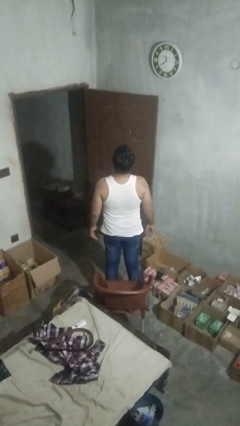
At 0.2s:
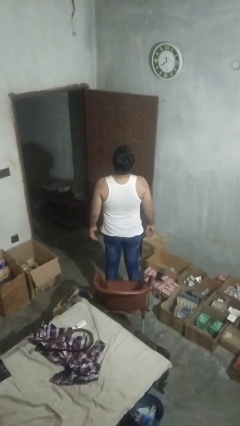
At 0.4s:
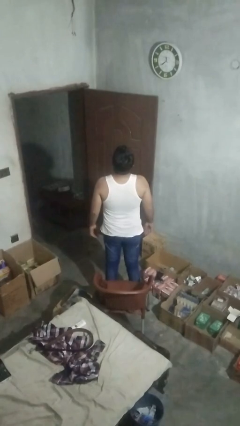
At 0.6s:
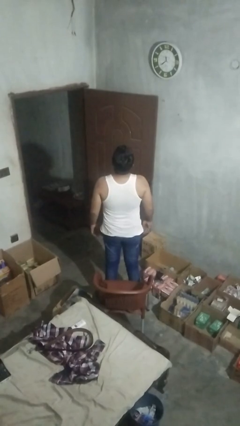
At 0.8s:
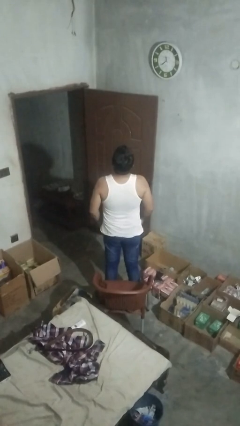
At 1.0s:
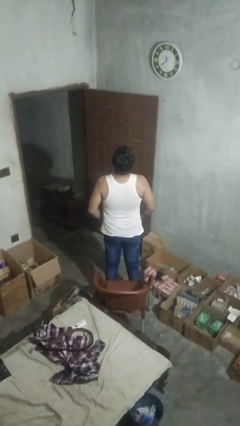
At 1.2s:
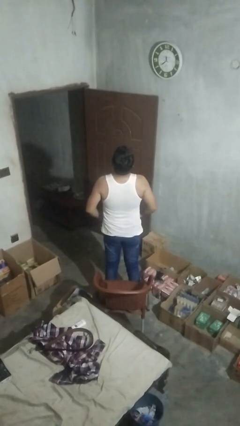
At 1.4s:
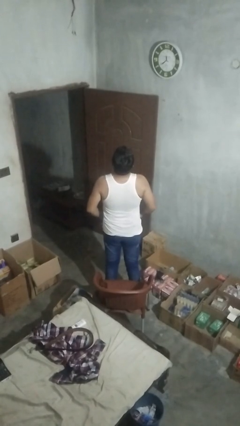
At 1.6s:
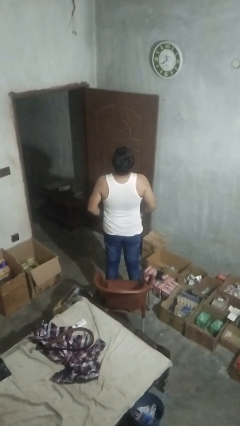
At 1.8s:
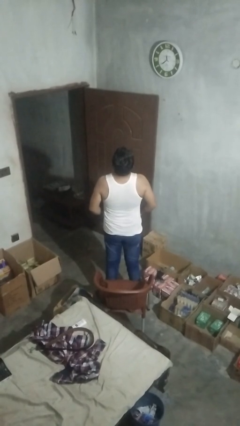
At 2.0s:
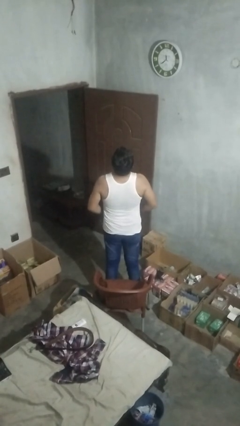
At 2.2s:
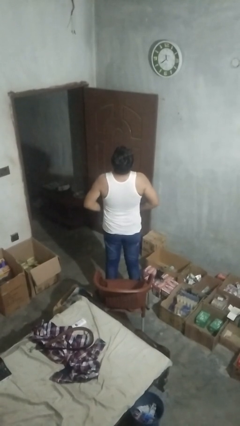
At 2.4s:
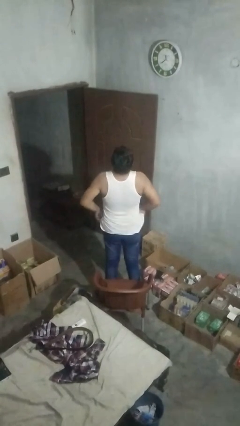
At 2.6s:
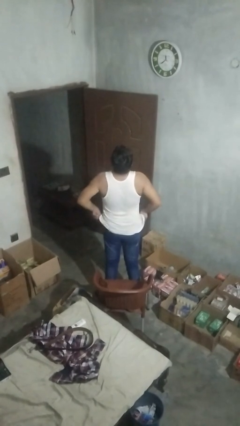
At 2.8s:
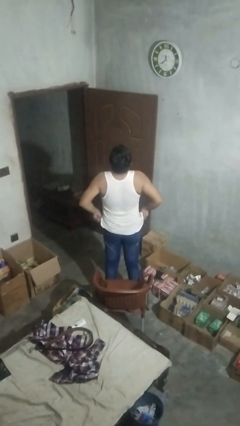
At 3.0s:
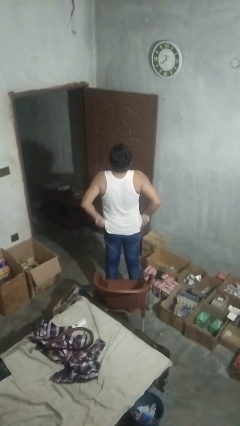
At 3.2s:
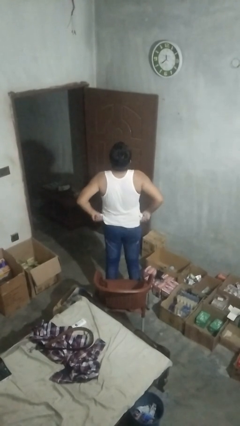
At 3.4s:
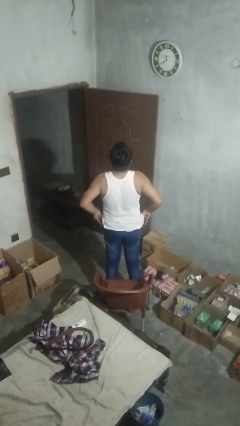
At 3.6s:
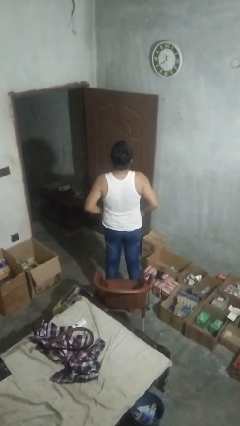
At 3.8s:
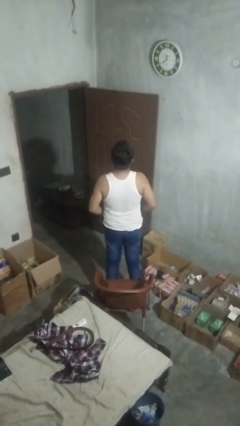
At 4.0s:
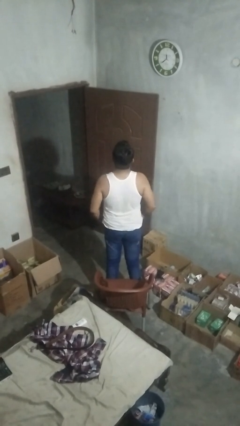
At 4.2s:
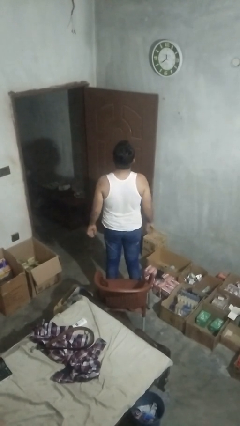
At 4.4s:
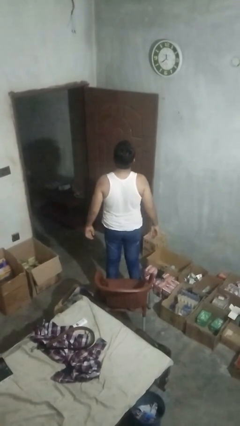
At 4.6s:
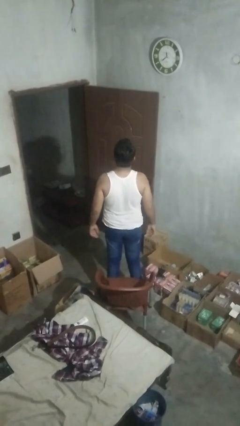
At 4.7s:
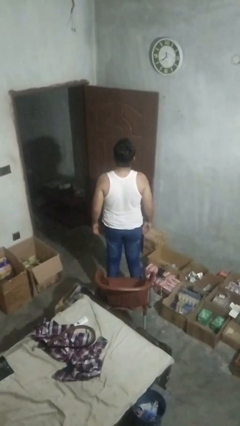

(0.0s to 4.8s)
person hikes up pants

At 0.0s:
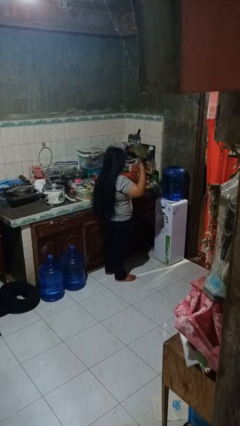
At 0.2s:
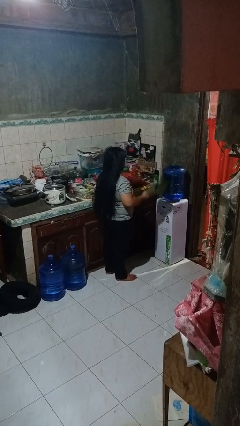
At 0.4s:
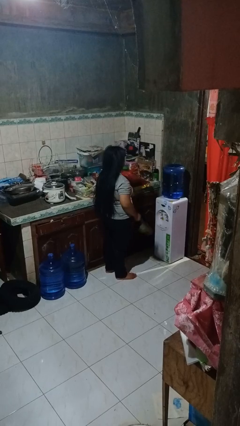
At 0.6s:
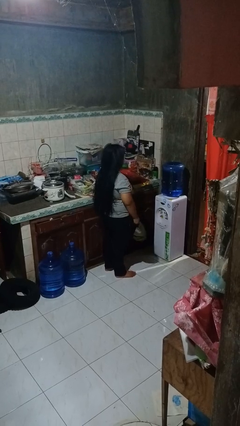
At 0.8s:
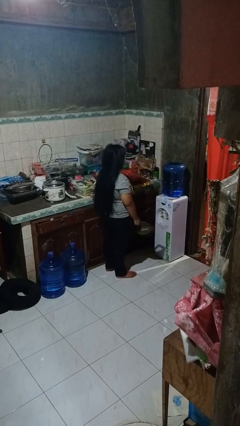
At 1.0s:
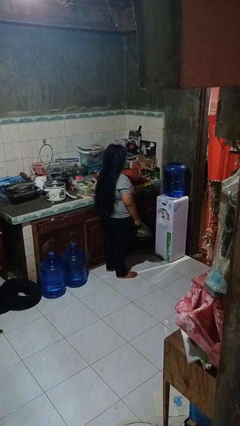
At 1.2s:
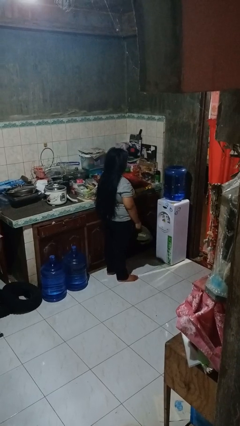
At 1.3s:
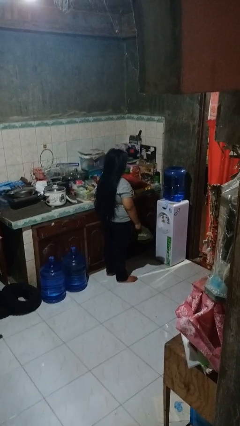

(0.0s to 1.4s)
person takes off hat

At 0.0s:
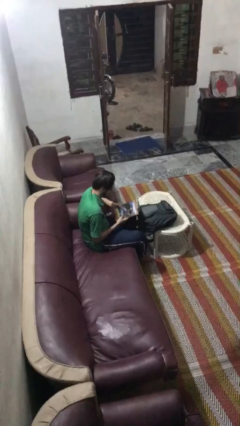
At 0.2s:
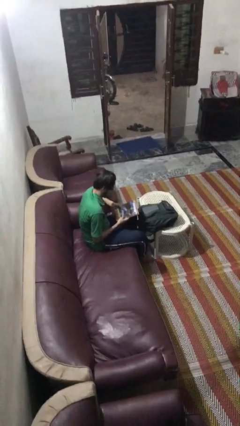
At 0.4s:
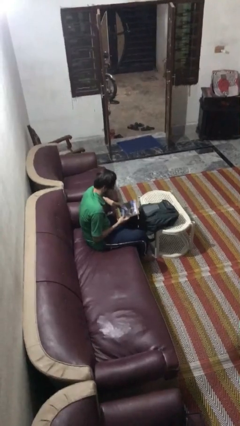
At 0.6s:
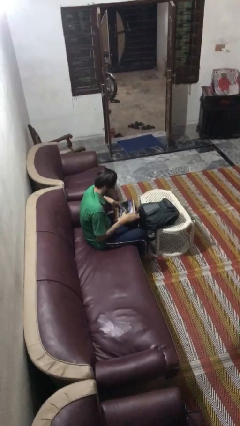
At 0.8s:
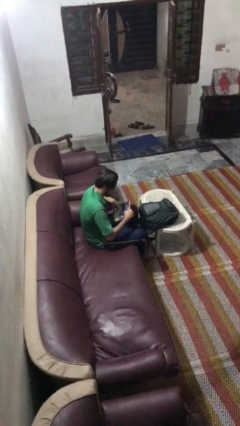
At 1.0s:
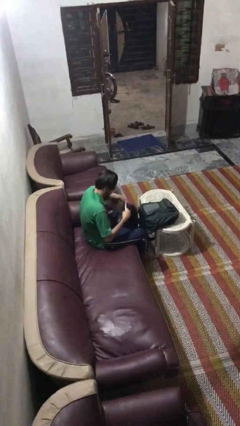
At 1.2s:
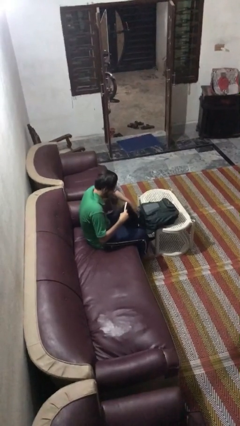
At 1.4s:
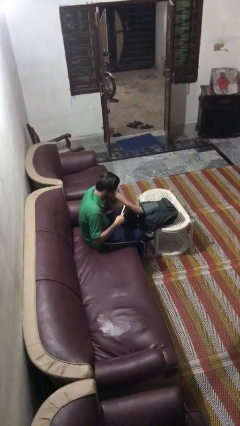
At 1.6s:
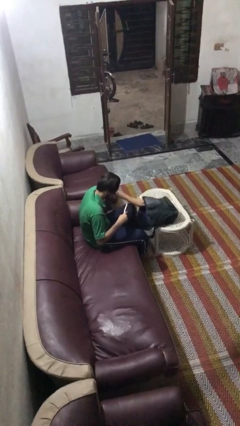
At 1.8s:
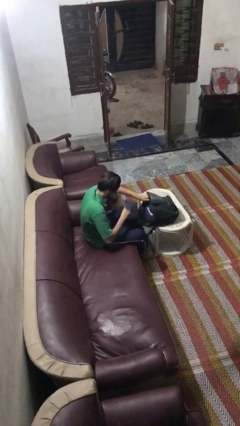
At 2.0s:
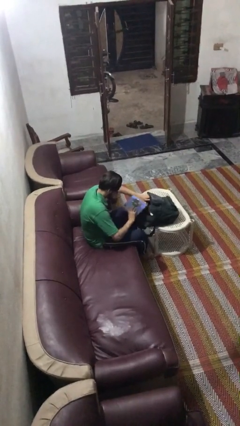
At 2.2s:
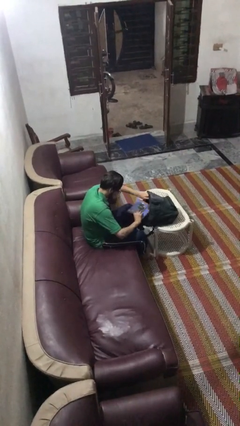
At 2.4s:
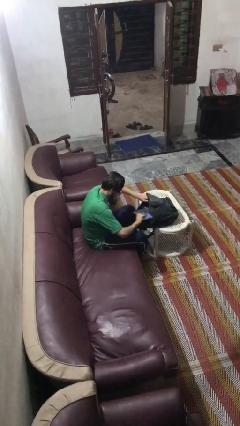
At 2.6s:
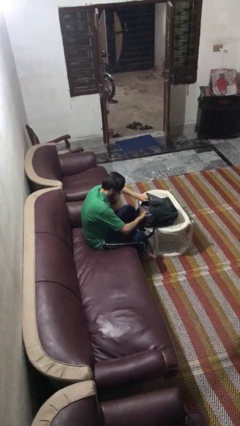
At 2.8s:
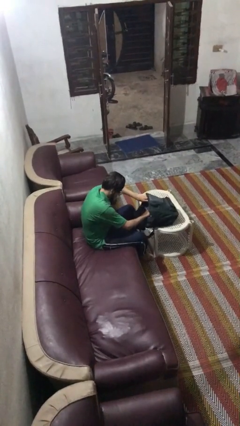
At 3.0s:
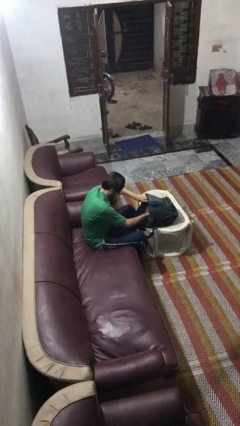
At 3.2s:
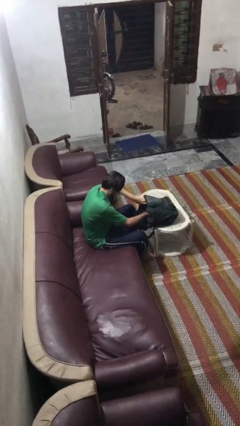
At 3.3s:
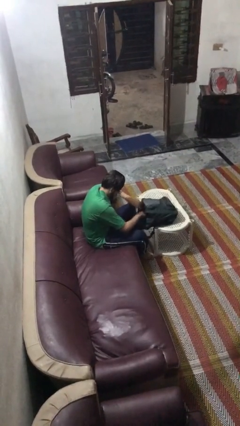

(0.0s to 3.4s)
person puts object into backpack

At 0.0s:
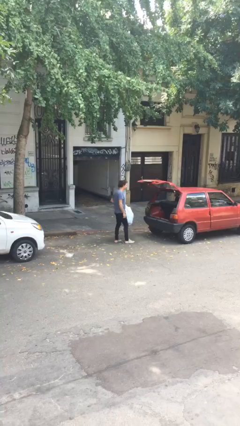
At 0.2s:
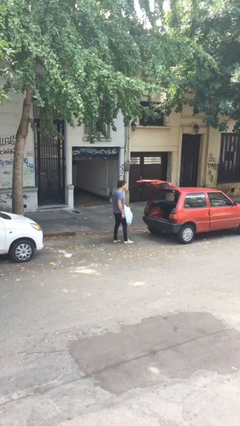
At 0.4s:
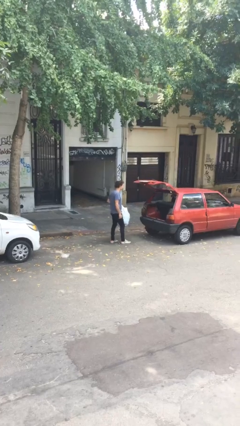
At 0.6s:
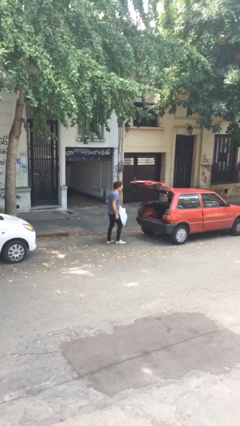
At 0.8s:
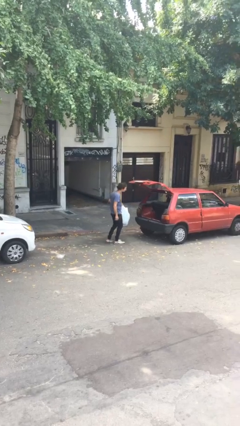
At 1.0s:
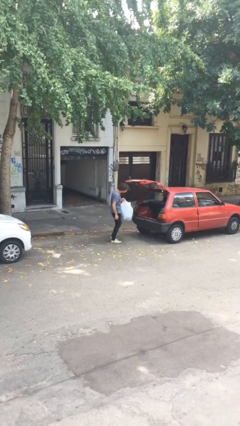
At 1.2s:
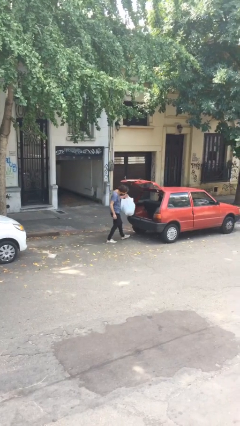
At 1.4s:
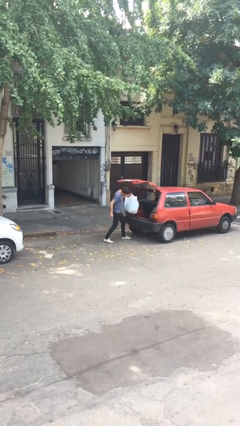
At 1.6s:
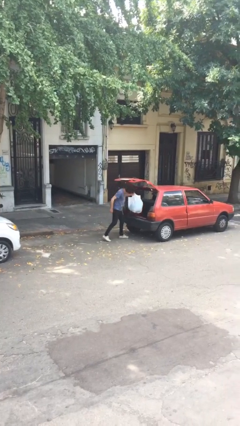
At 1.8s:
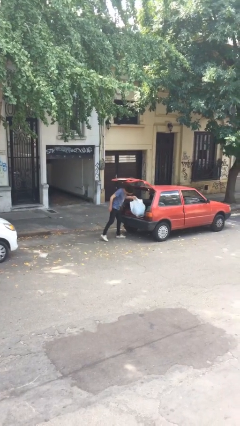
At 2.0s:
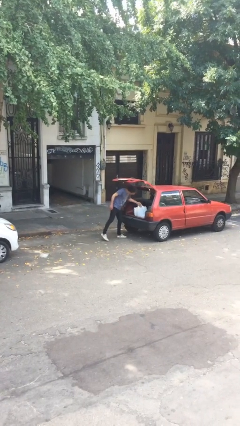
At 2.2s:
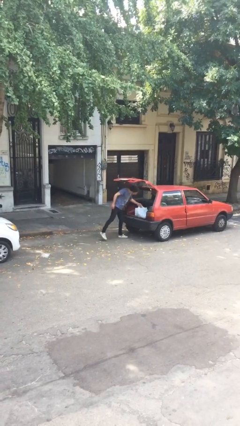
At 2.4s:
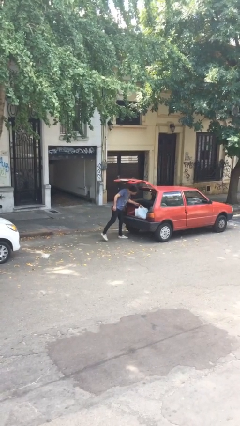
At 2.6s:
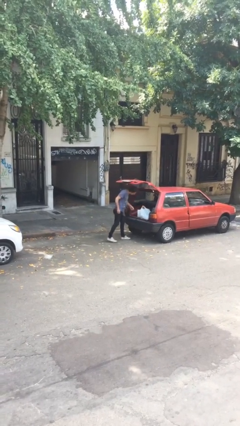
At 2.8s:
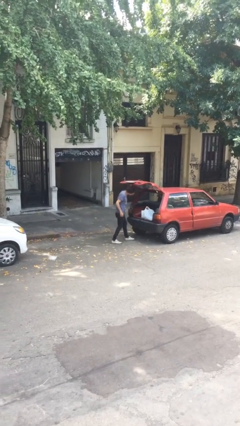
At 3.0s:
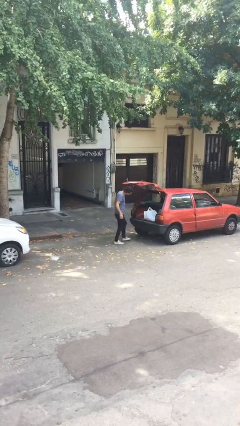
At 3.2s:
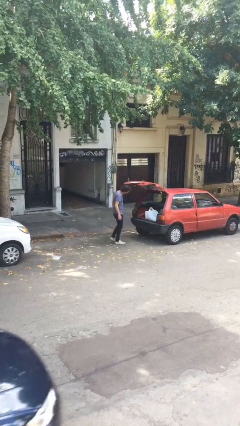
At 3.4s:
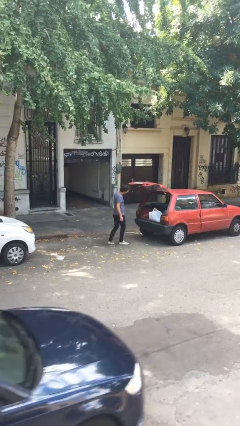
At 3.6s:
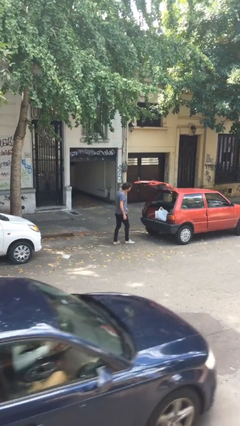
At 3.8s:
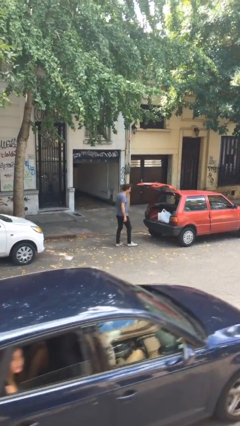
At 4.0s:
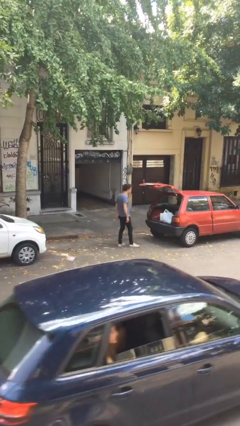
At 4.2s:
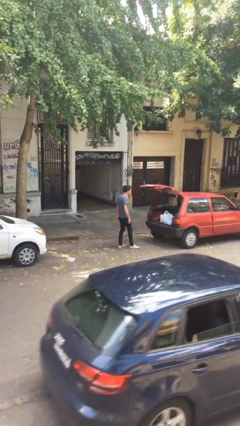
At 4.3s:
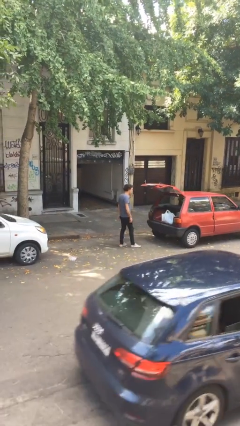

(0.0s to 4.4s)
person loads car

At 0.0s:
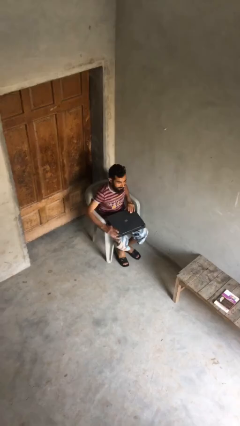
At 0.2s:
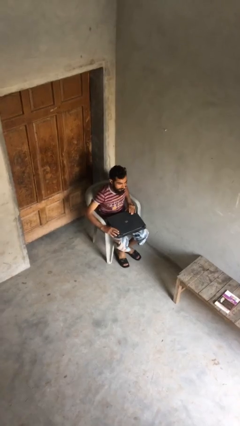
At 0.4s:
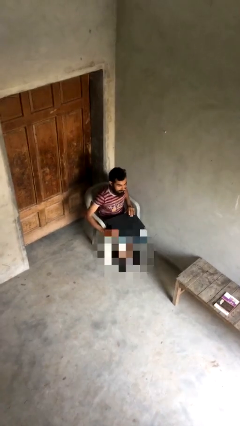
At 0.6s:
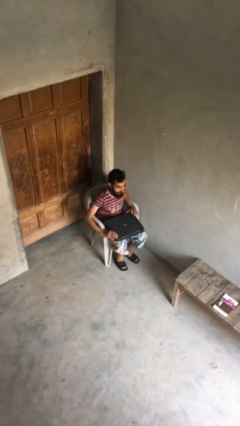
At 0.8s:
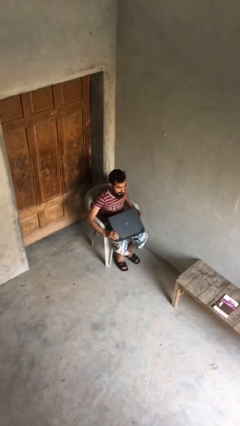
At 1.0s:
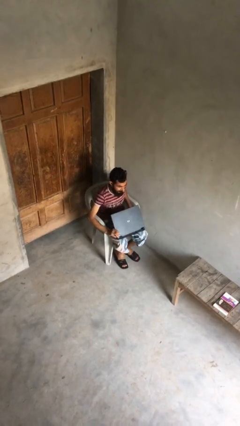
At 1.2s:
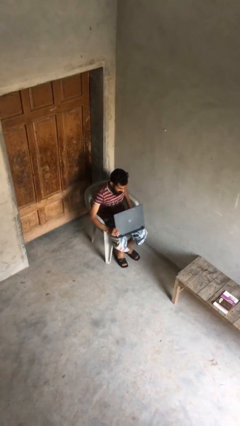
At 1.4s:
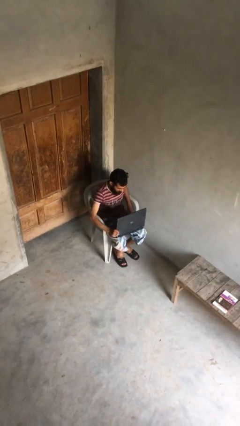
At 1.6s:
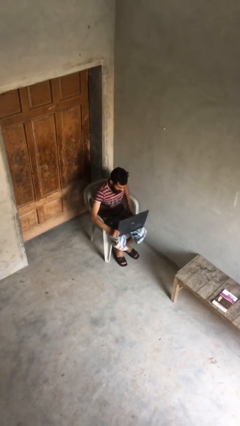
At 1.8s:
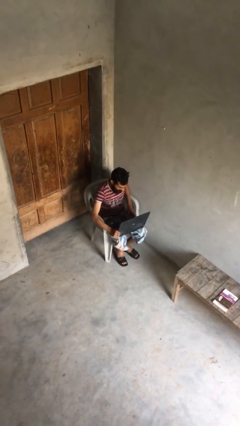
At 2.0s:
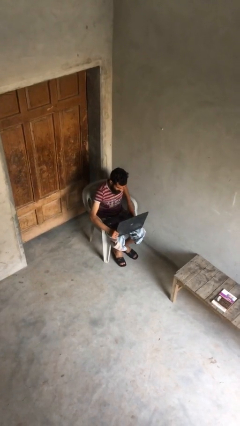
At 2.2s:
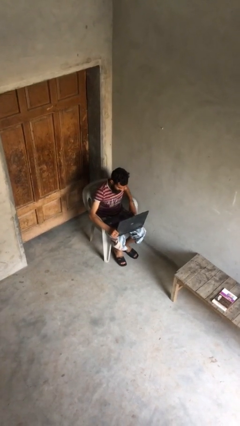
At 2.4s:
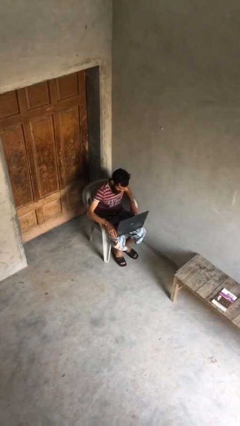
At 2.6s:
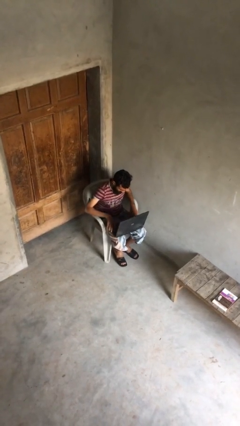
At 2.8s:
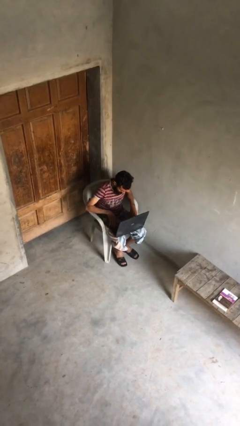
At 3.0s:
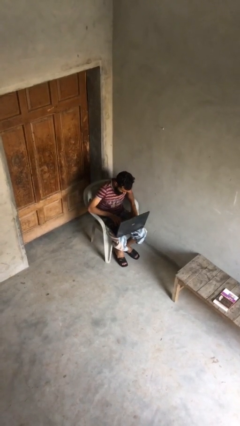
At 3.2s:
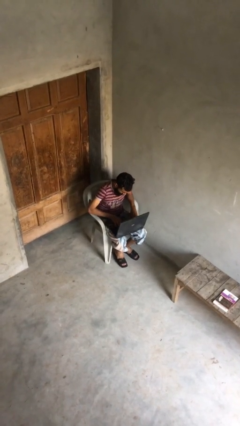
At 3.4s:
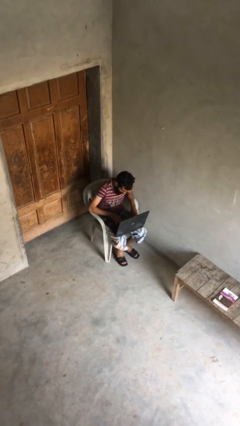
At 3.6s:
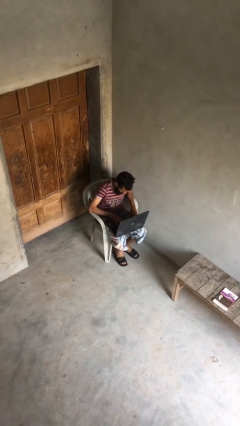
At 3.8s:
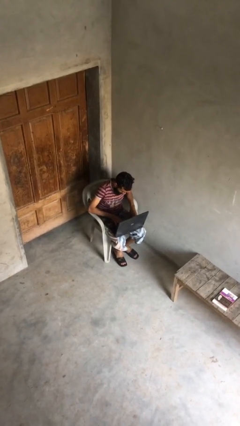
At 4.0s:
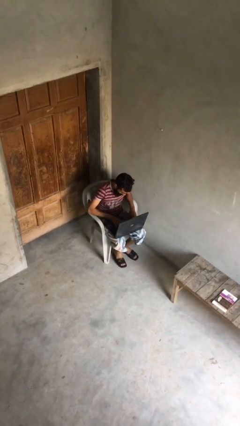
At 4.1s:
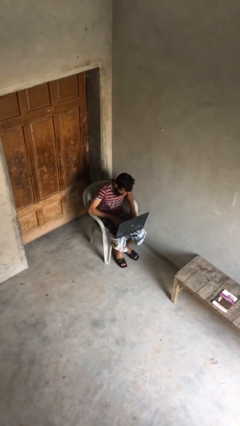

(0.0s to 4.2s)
person interacts with laptop
